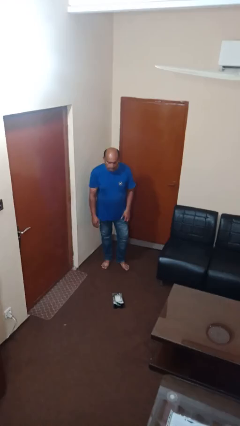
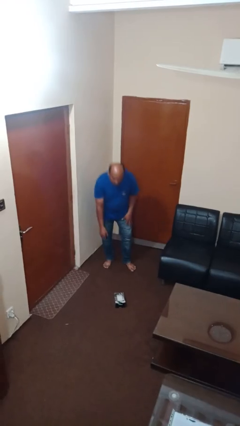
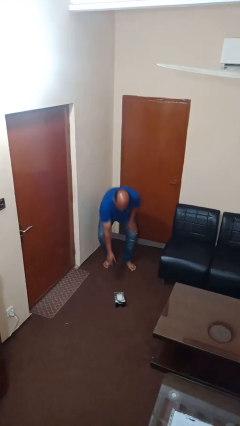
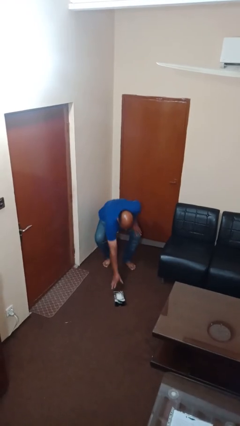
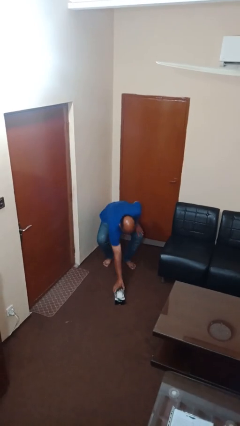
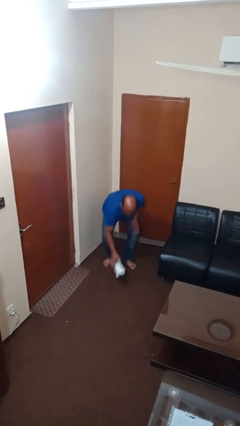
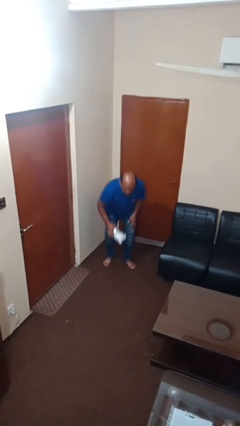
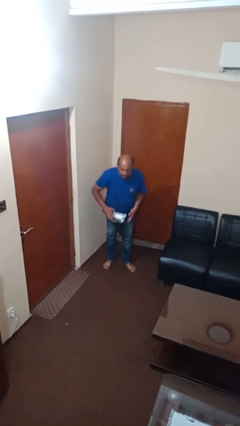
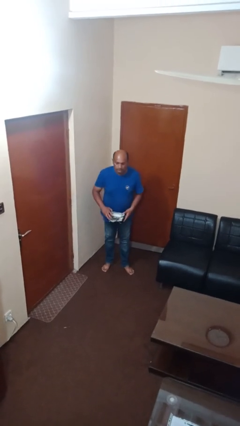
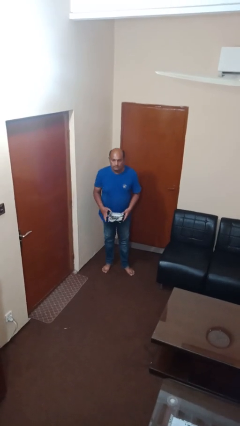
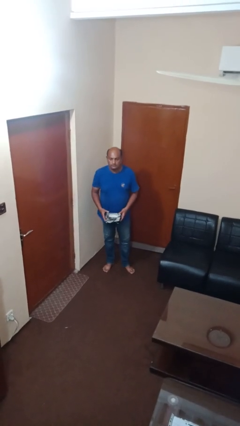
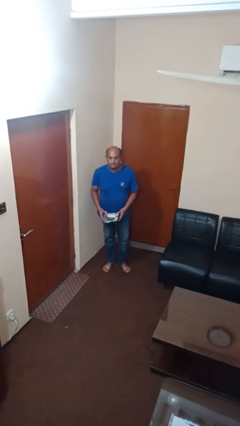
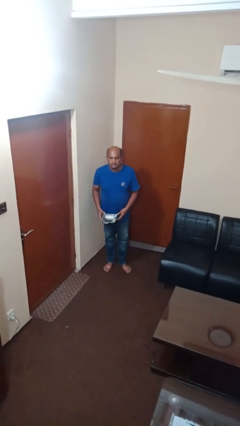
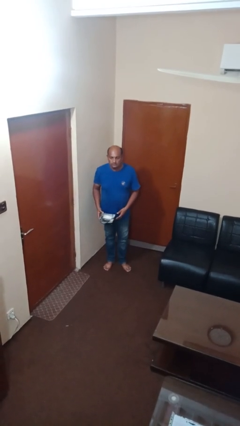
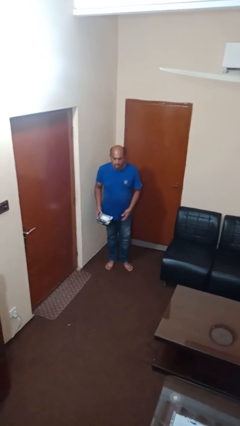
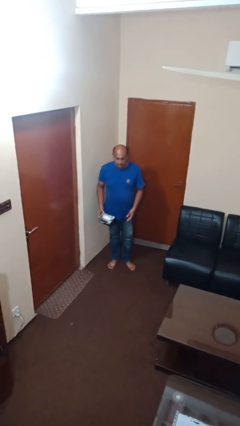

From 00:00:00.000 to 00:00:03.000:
person picks up object from floor

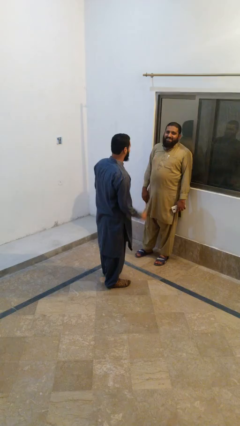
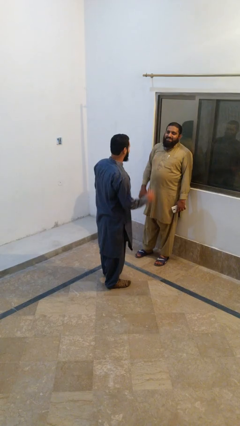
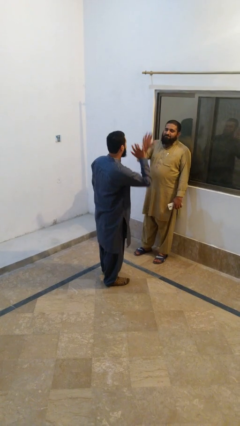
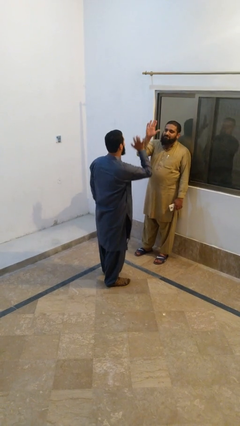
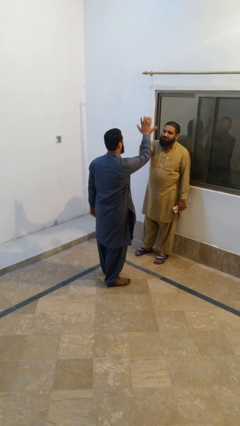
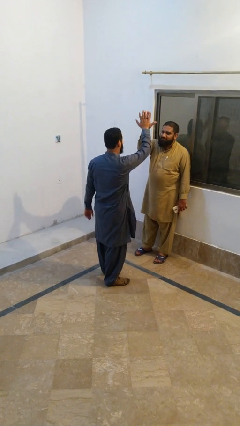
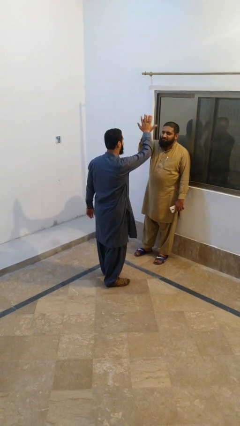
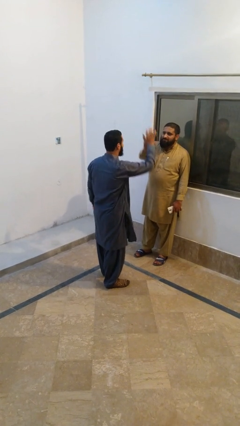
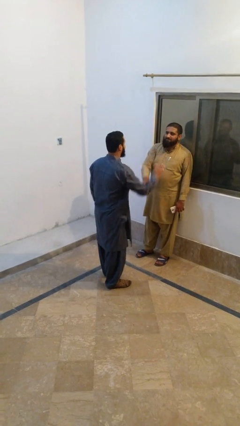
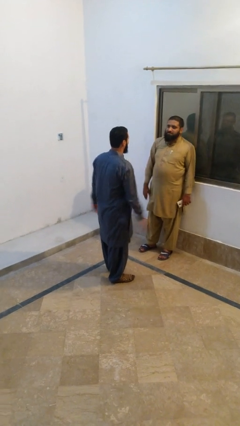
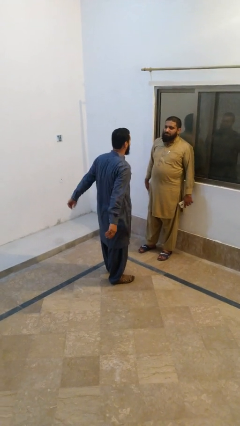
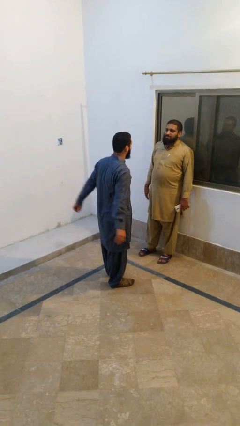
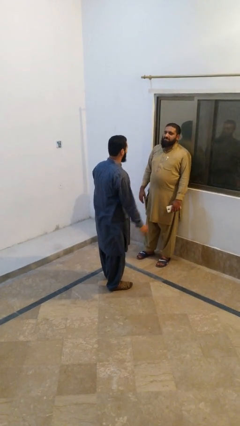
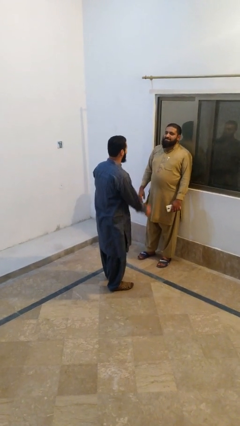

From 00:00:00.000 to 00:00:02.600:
person highfives hand

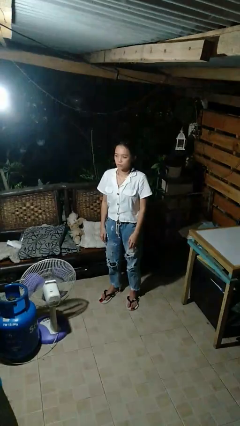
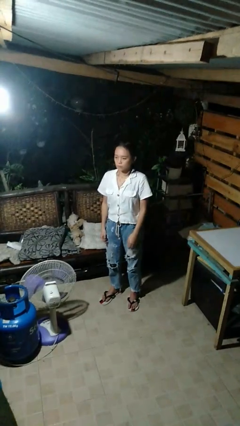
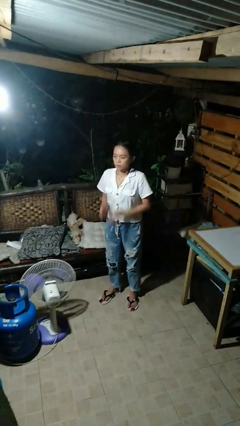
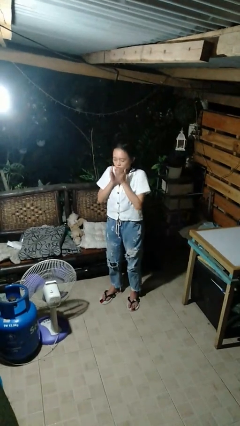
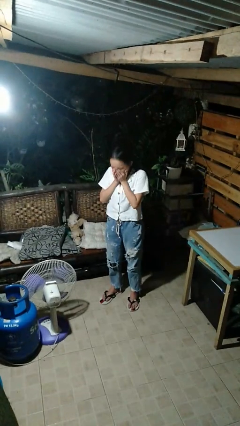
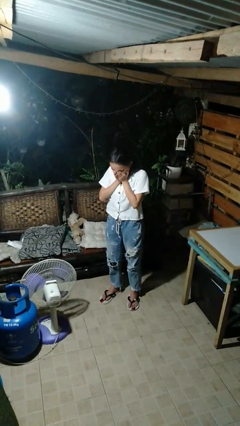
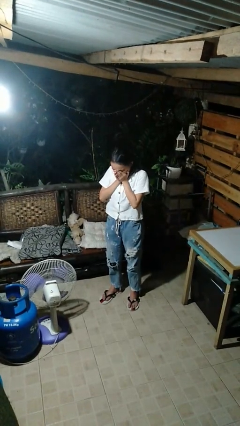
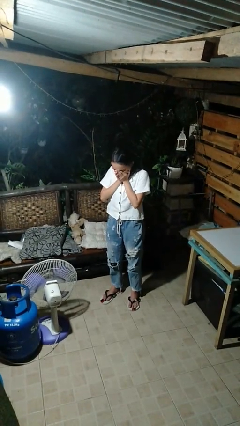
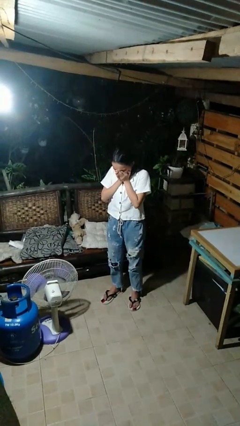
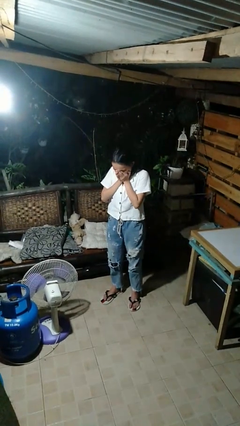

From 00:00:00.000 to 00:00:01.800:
person sneezes into hand

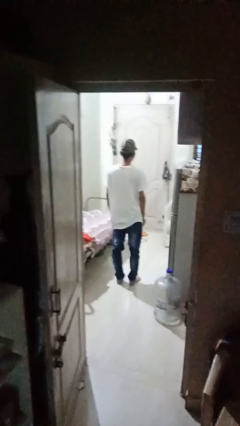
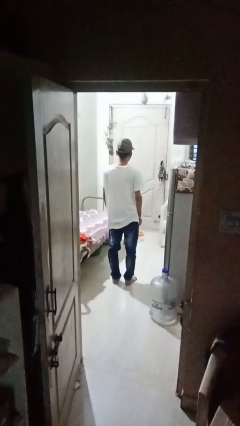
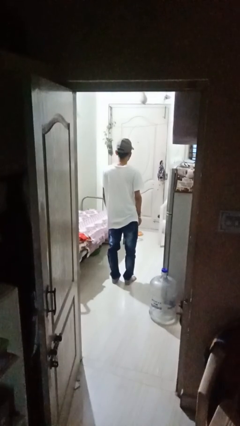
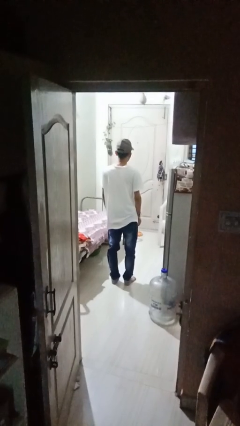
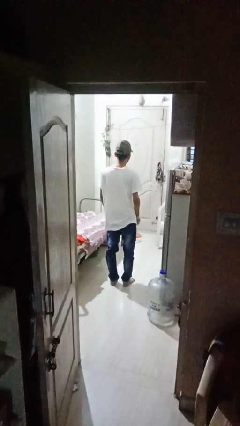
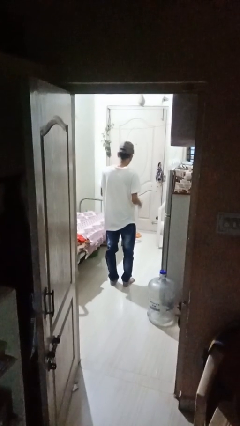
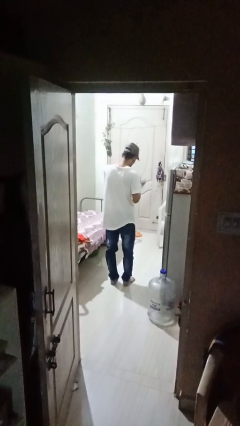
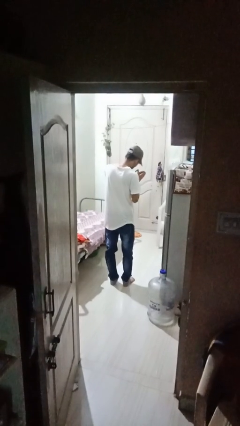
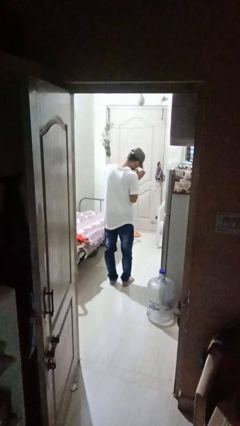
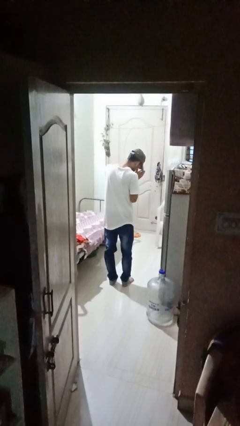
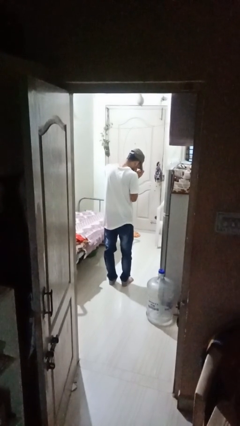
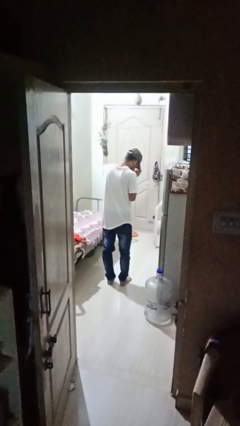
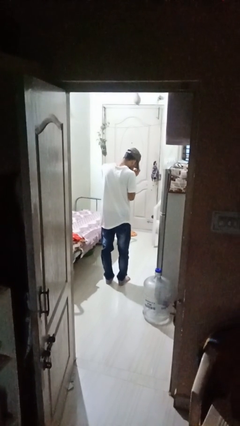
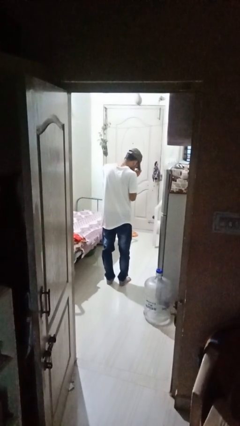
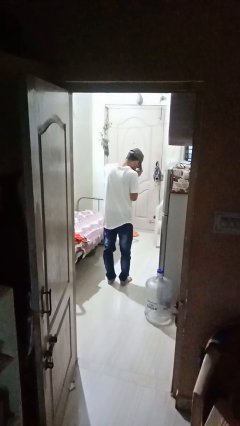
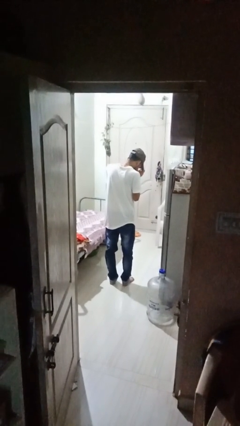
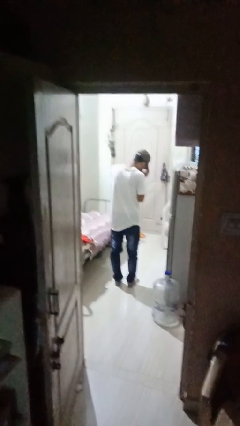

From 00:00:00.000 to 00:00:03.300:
person prays

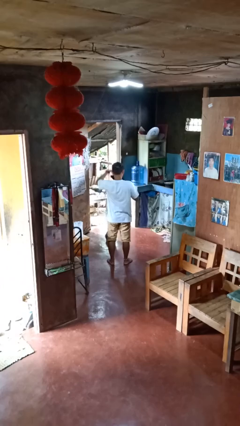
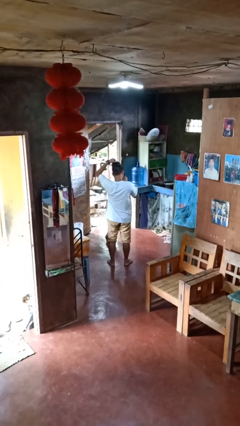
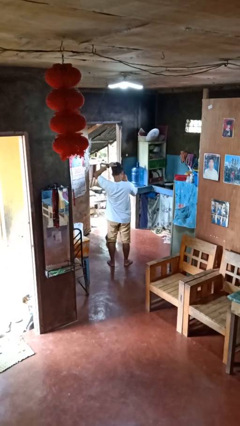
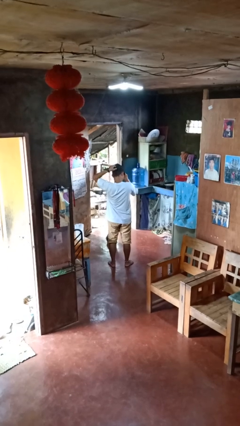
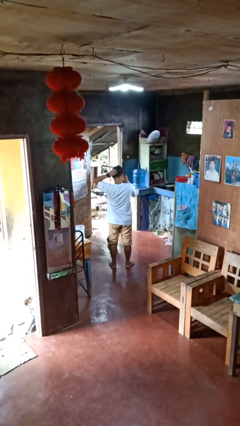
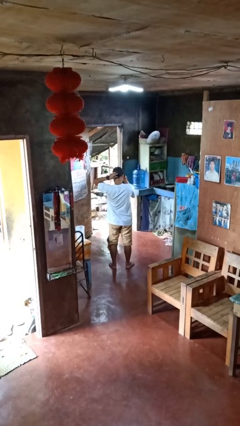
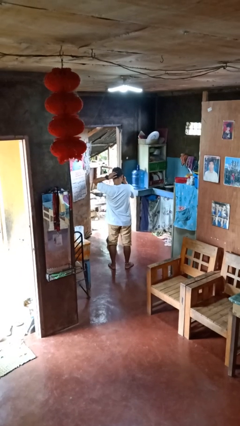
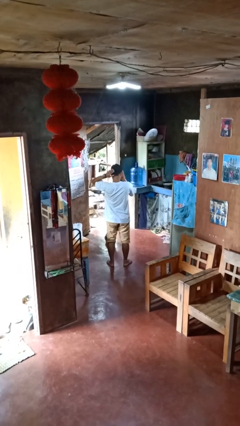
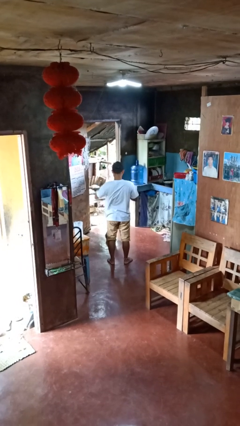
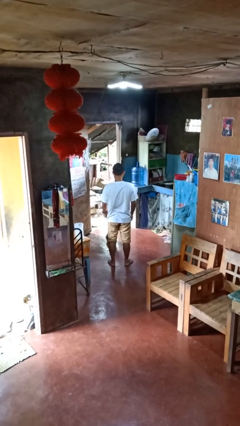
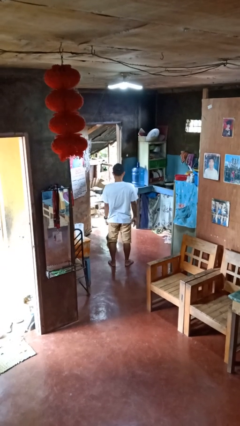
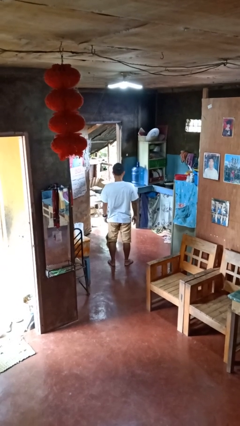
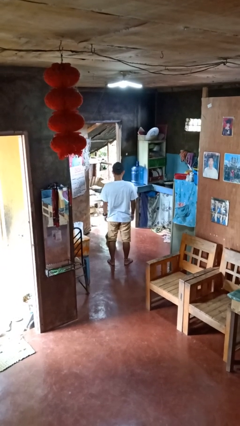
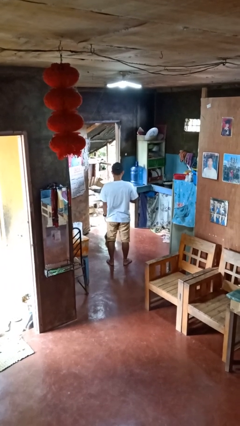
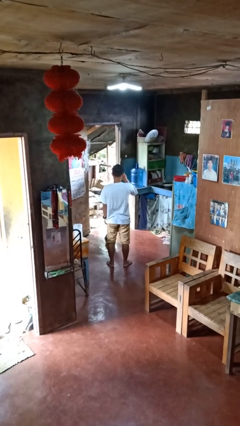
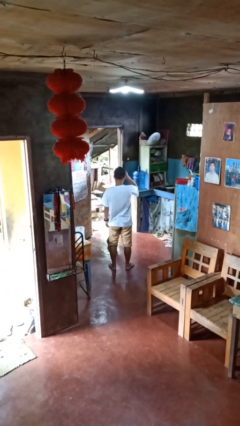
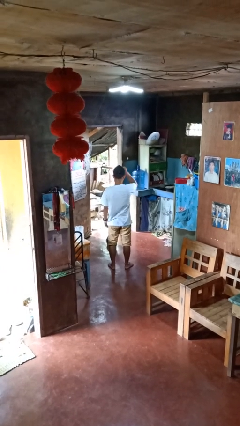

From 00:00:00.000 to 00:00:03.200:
person puts on hat

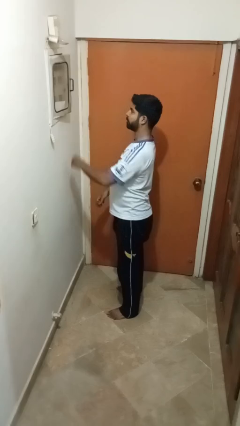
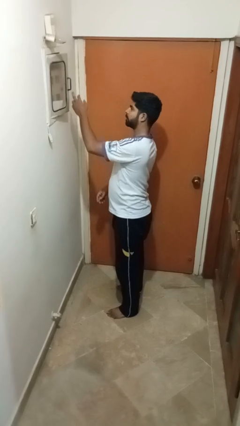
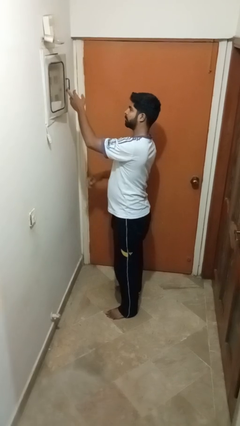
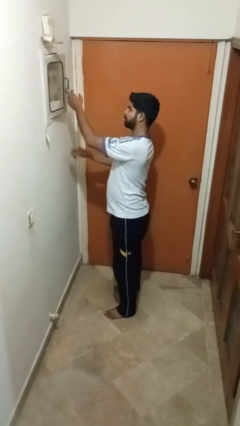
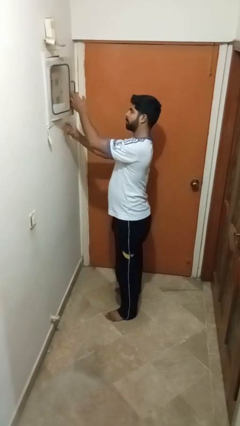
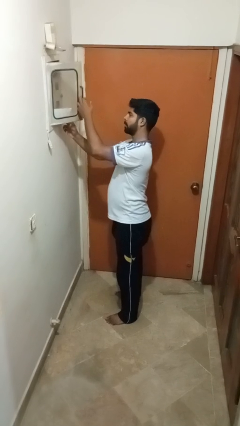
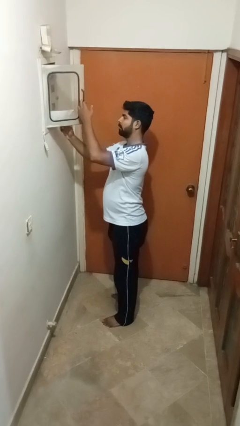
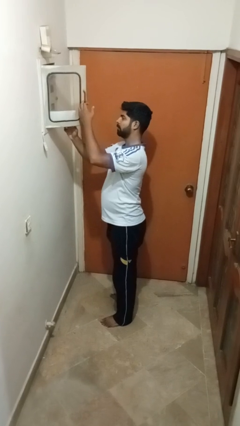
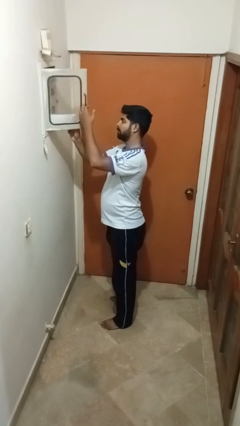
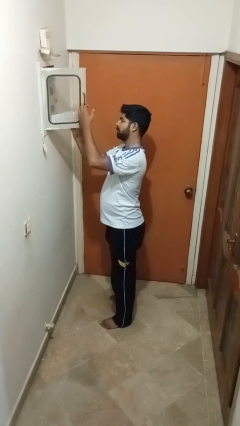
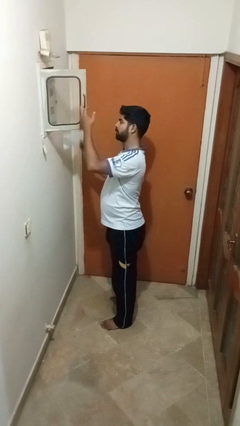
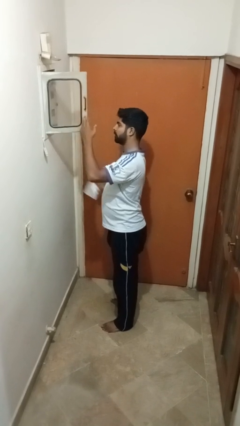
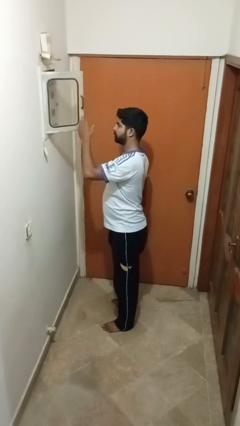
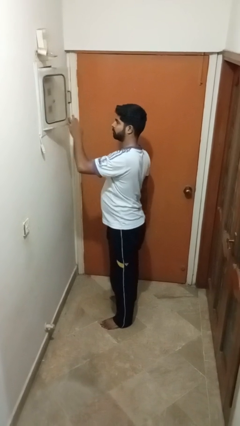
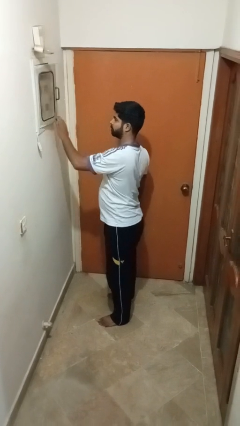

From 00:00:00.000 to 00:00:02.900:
person takes letters from mailbox

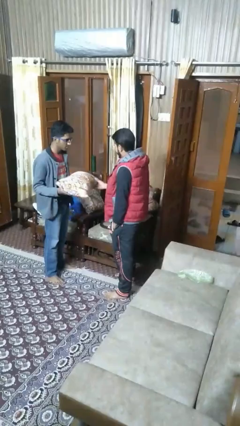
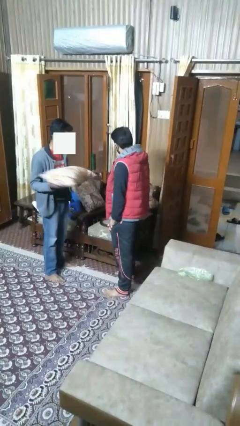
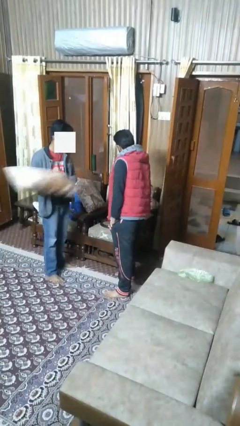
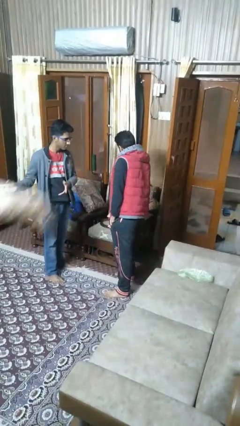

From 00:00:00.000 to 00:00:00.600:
person transfers object to person
